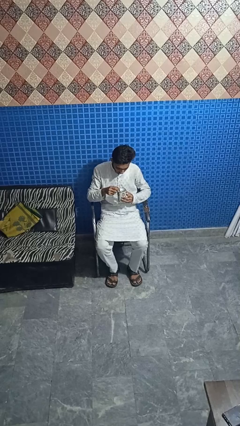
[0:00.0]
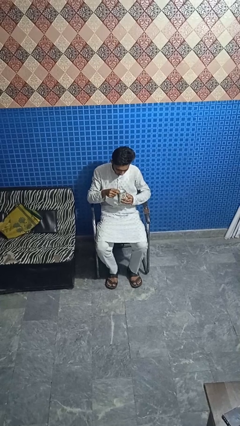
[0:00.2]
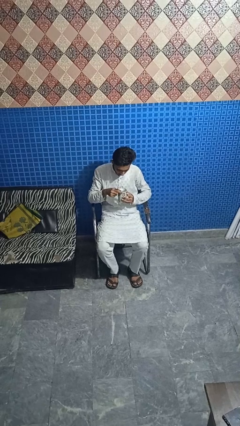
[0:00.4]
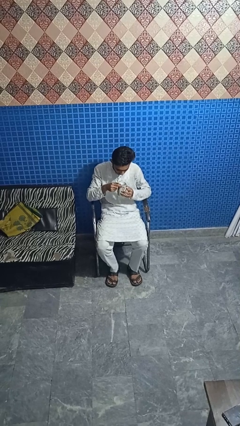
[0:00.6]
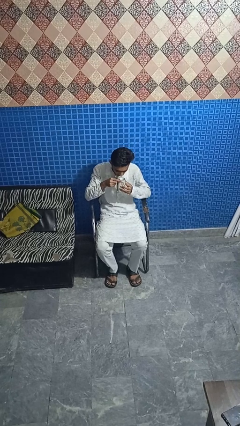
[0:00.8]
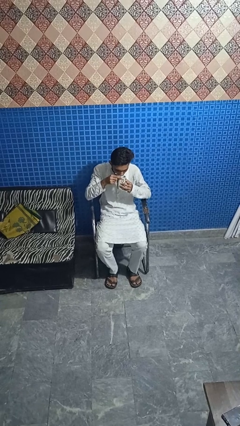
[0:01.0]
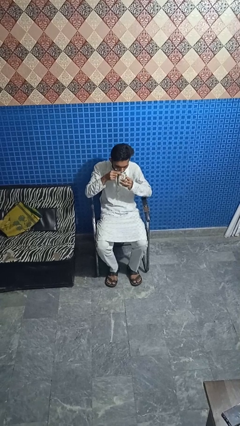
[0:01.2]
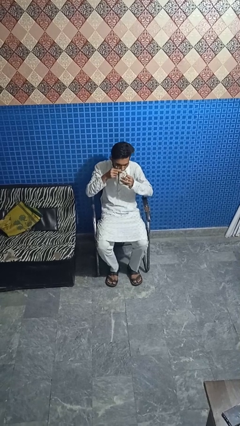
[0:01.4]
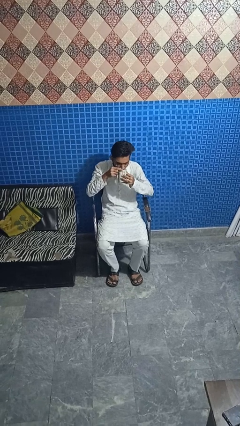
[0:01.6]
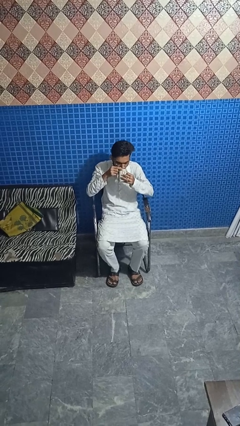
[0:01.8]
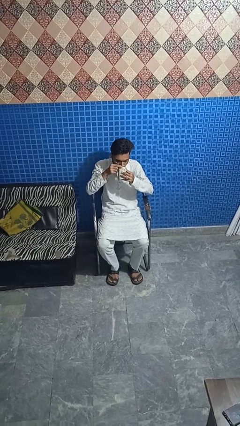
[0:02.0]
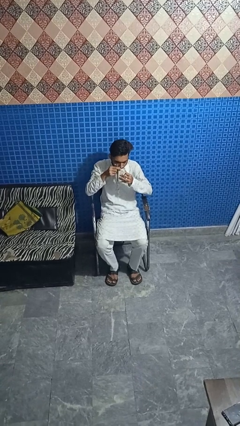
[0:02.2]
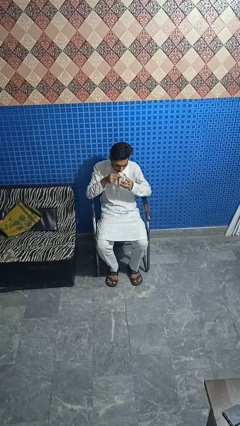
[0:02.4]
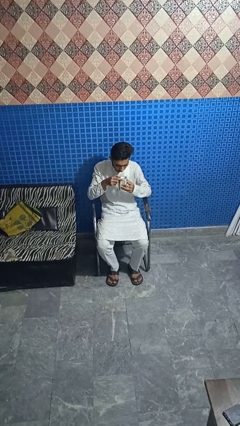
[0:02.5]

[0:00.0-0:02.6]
person drinks from mug

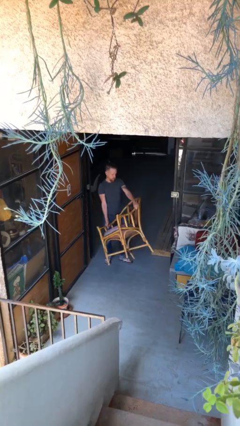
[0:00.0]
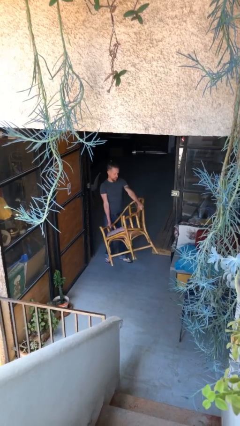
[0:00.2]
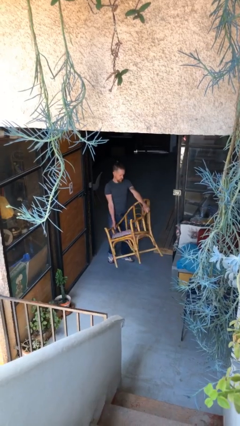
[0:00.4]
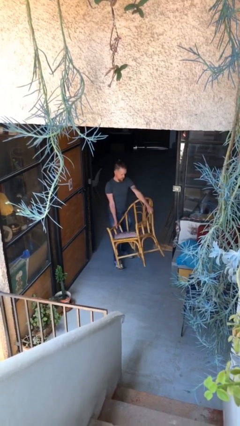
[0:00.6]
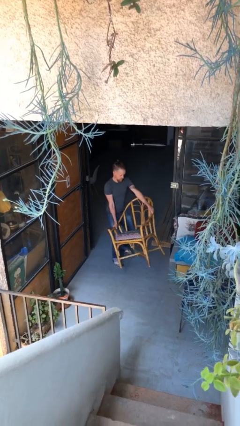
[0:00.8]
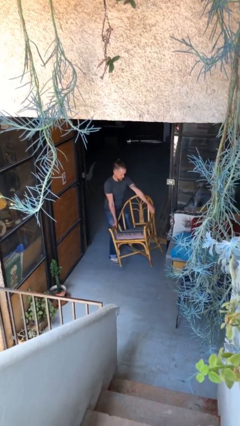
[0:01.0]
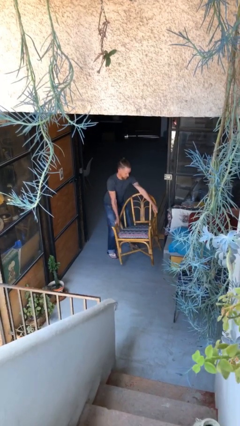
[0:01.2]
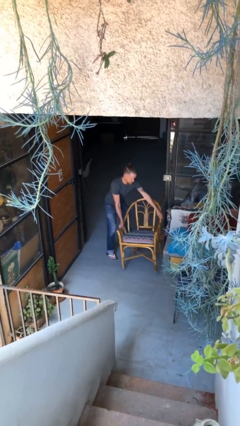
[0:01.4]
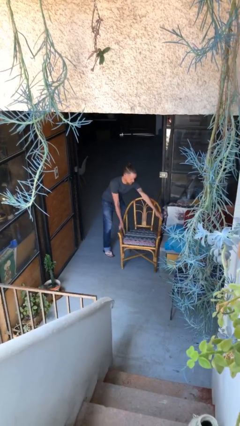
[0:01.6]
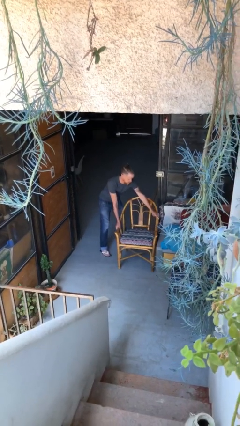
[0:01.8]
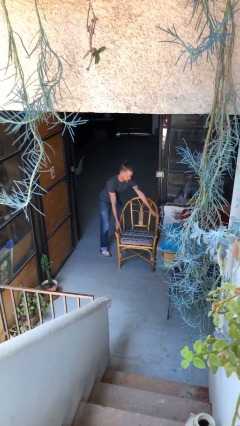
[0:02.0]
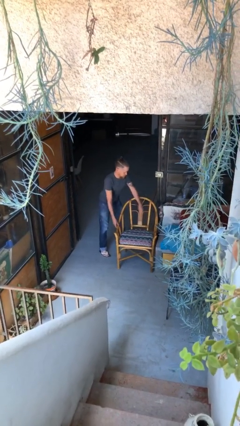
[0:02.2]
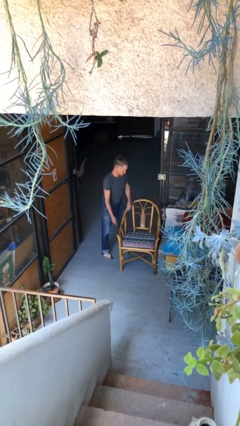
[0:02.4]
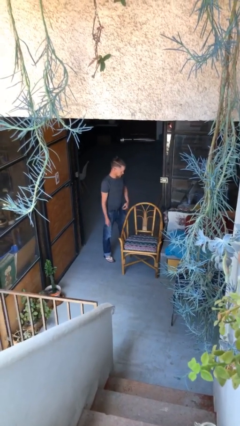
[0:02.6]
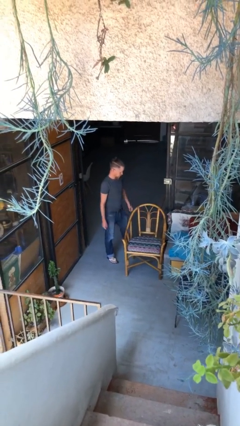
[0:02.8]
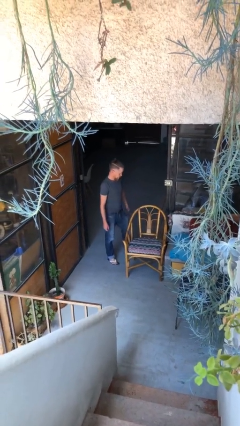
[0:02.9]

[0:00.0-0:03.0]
person puts down object on floor

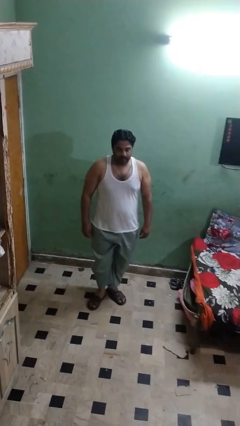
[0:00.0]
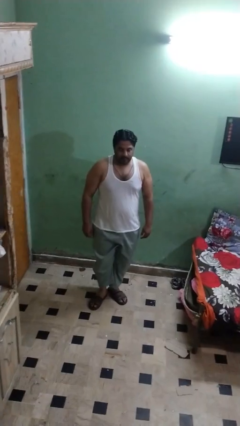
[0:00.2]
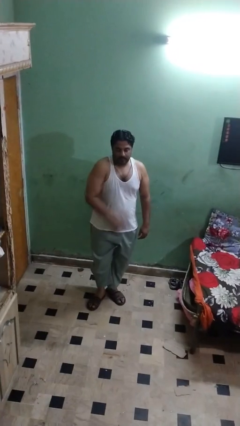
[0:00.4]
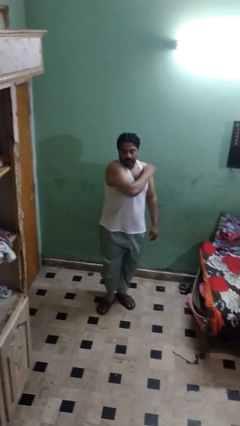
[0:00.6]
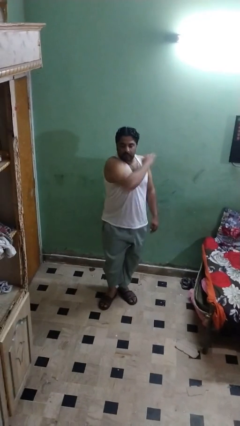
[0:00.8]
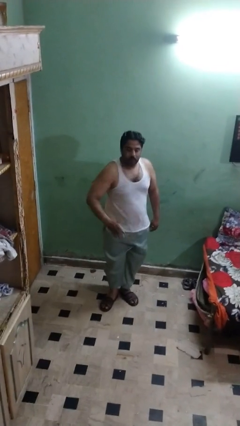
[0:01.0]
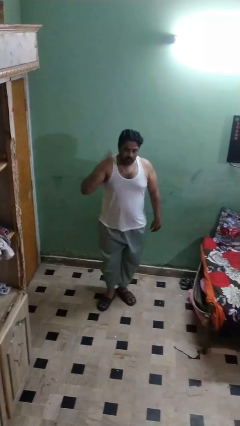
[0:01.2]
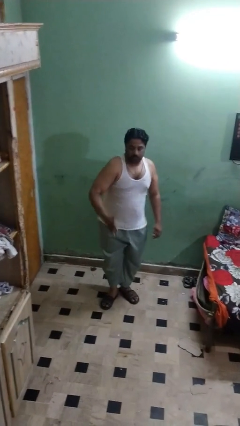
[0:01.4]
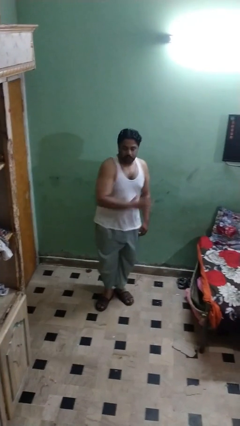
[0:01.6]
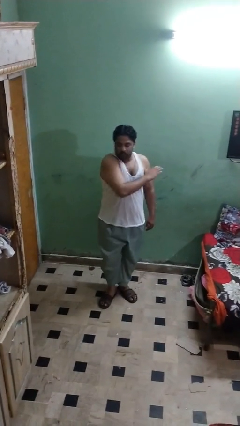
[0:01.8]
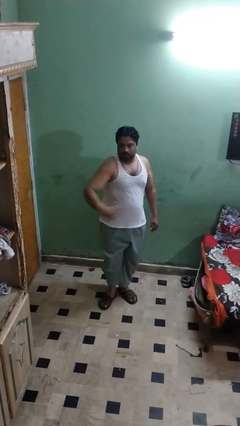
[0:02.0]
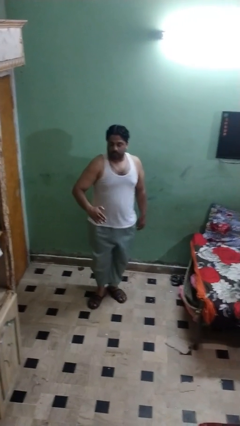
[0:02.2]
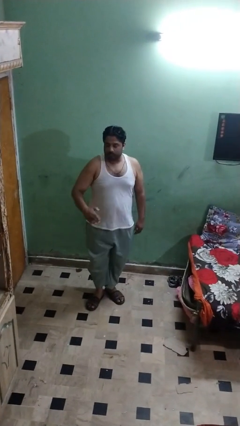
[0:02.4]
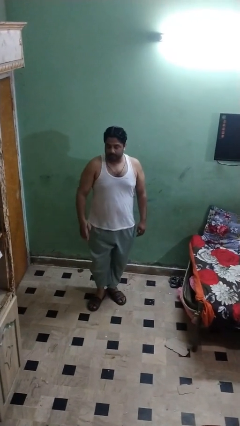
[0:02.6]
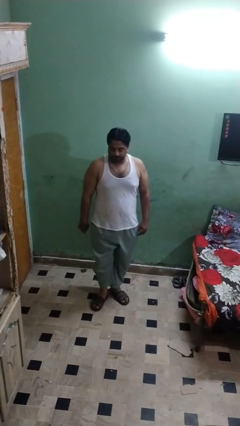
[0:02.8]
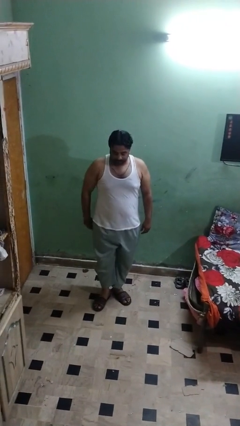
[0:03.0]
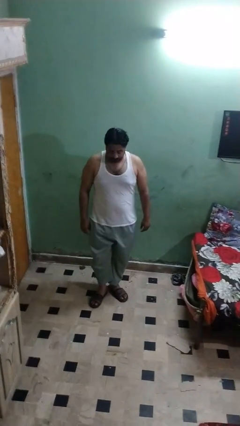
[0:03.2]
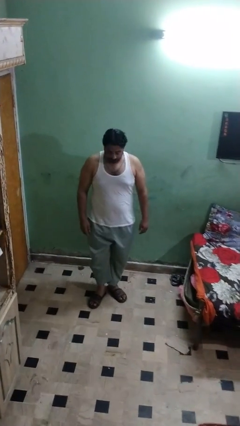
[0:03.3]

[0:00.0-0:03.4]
person karate chop

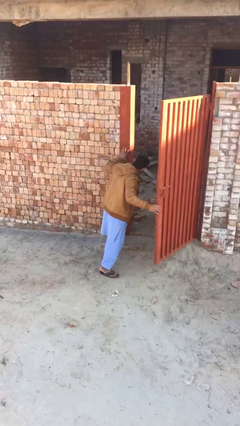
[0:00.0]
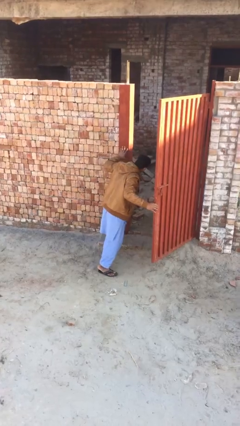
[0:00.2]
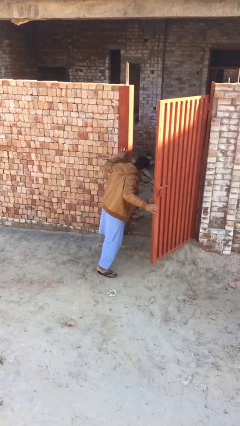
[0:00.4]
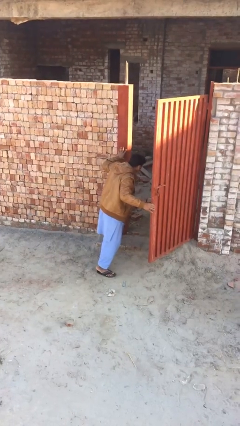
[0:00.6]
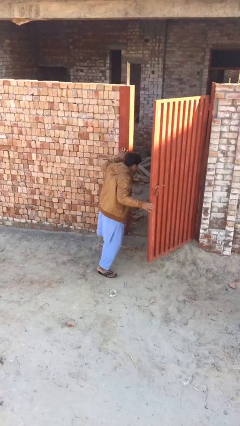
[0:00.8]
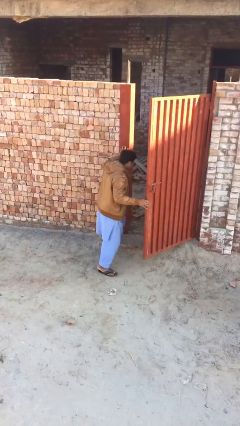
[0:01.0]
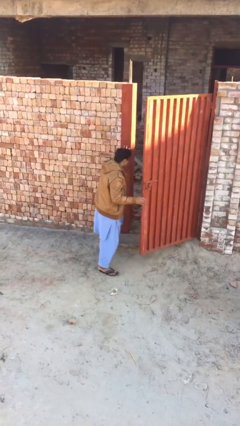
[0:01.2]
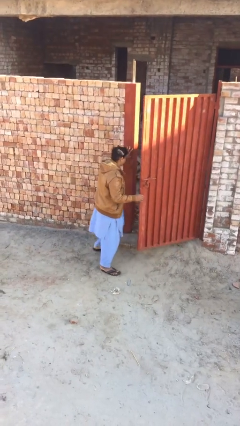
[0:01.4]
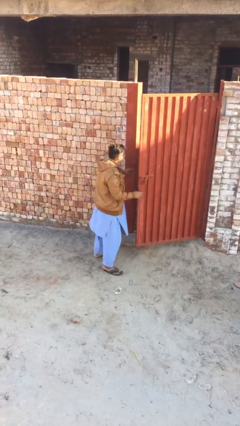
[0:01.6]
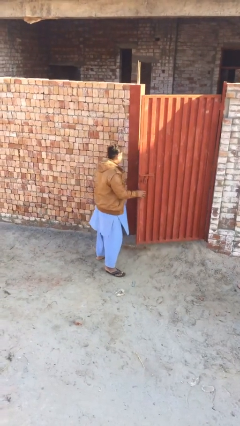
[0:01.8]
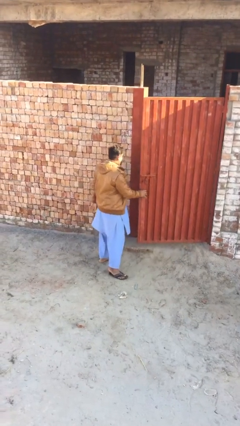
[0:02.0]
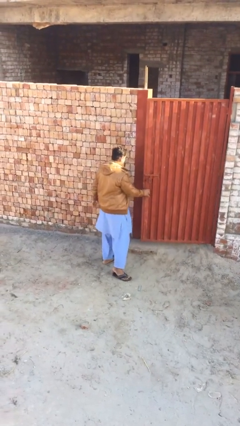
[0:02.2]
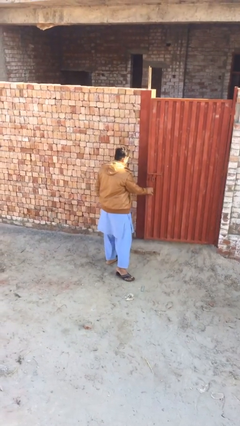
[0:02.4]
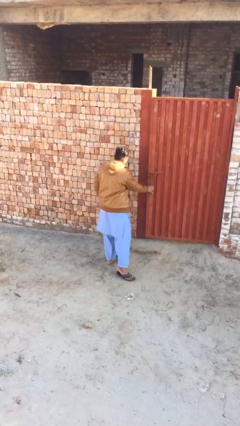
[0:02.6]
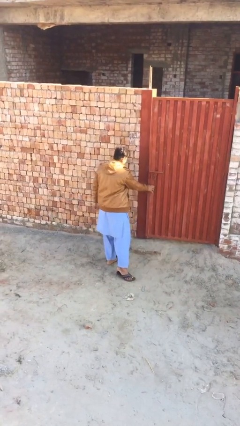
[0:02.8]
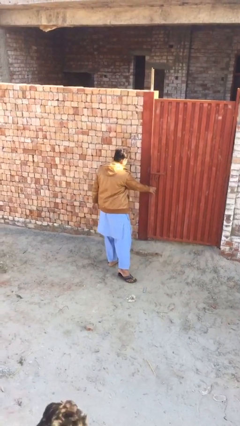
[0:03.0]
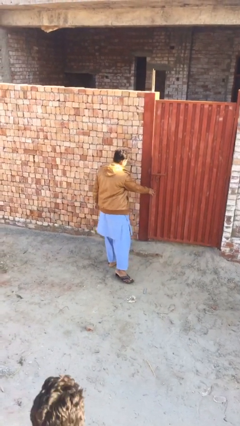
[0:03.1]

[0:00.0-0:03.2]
person closes facility door

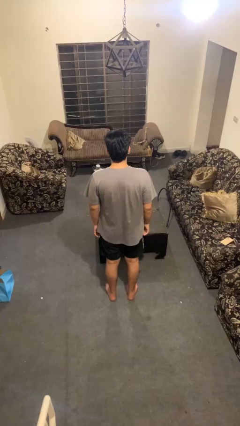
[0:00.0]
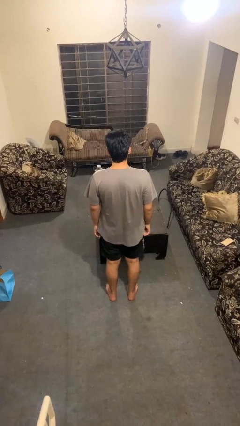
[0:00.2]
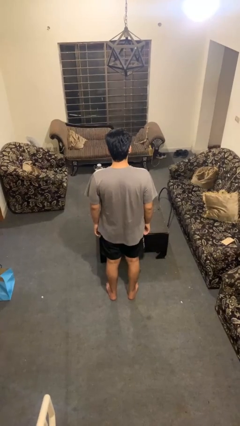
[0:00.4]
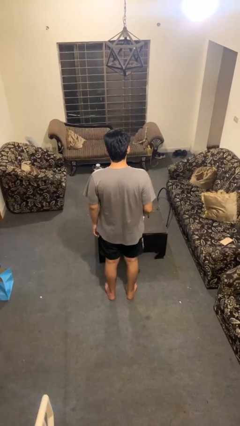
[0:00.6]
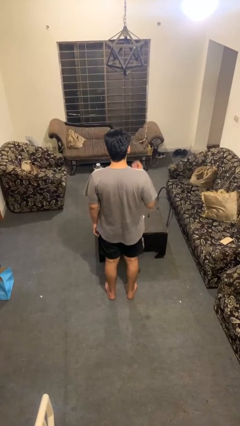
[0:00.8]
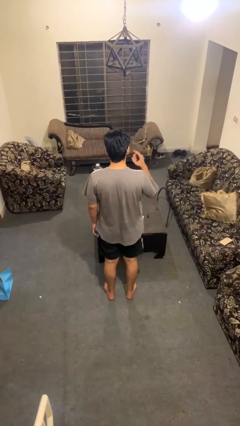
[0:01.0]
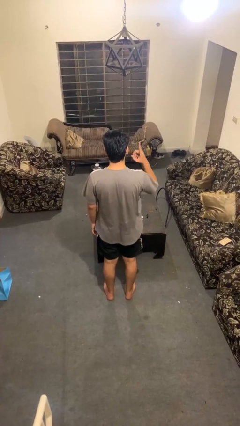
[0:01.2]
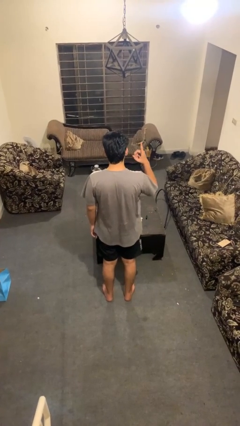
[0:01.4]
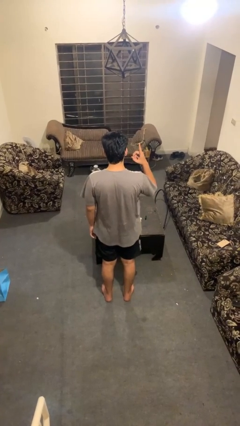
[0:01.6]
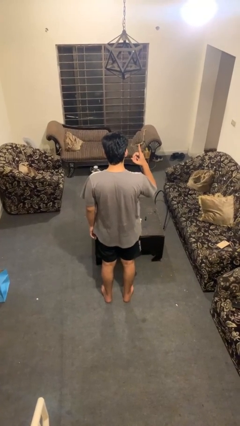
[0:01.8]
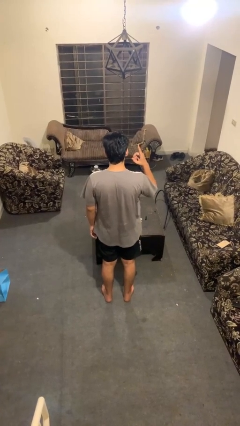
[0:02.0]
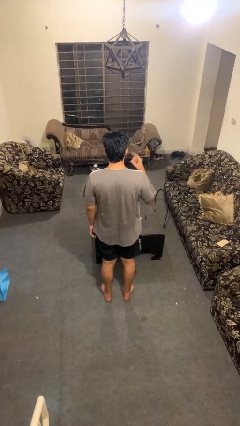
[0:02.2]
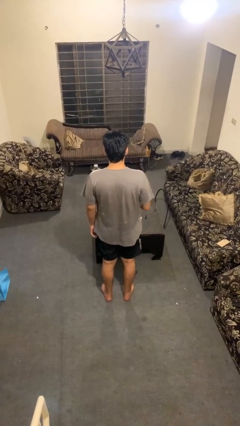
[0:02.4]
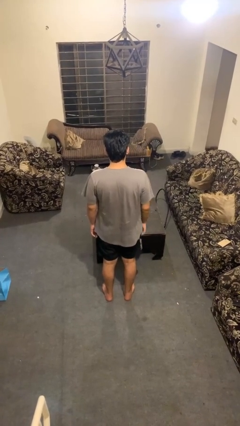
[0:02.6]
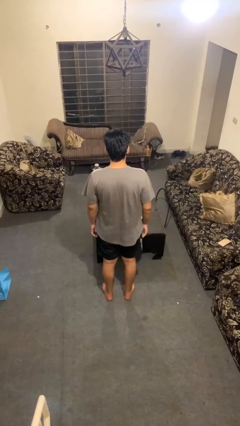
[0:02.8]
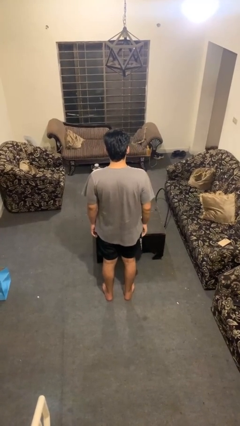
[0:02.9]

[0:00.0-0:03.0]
person gestures number one

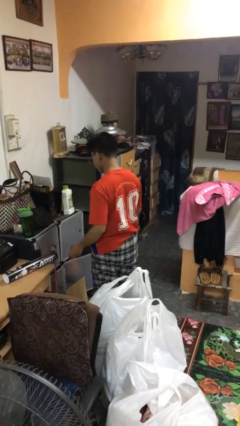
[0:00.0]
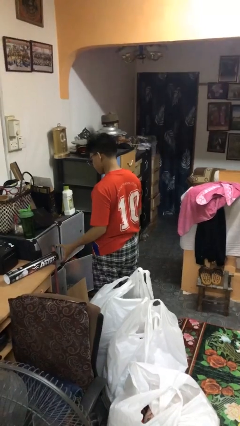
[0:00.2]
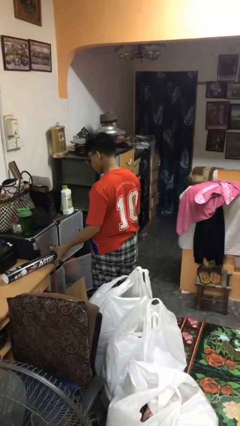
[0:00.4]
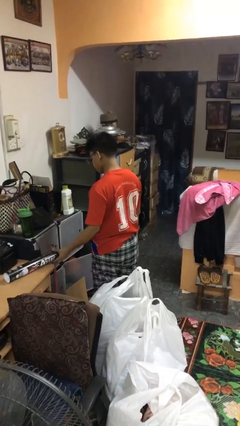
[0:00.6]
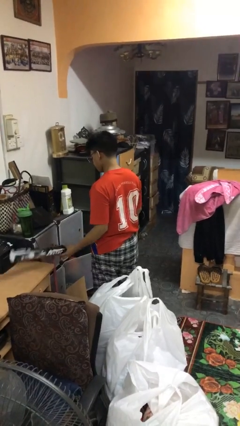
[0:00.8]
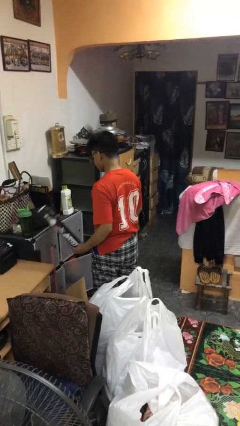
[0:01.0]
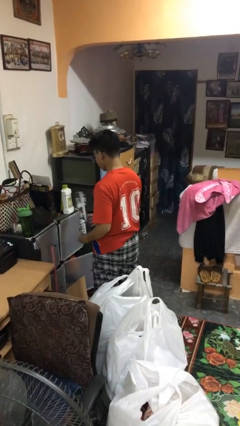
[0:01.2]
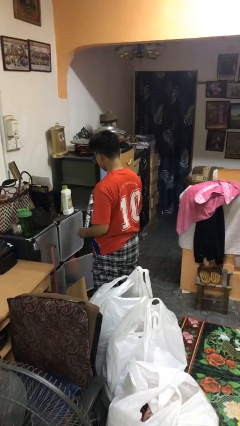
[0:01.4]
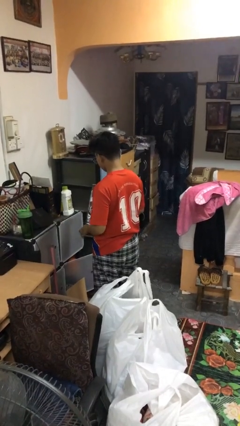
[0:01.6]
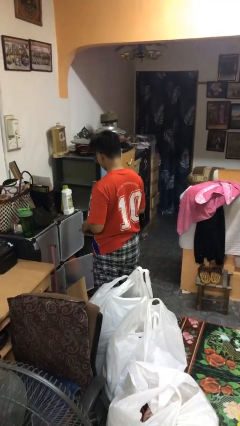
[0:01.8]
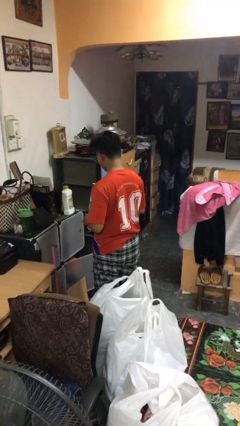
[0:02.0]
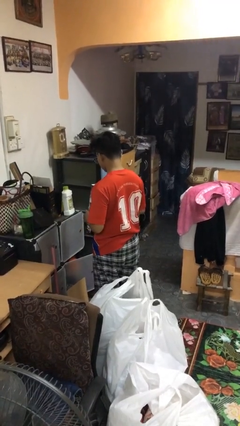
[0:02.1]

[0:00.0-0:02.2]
person picks up object from countertop

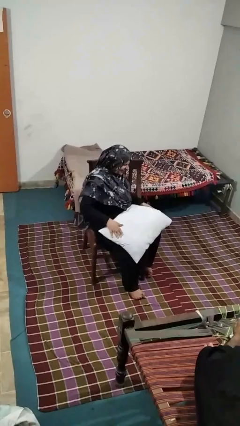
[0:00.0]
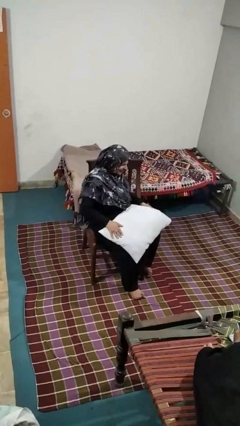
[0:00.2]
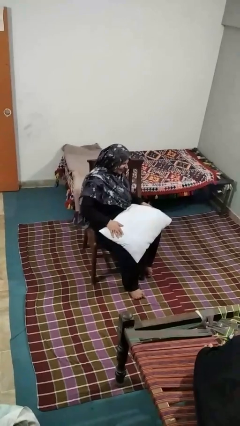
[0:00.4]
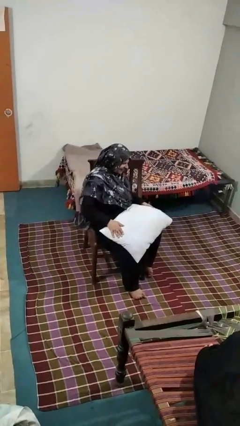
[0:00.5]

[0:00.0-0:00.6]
person waves hand over object
